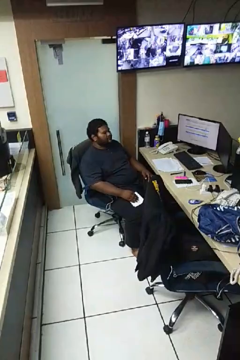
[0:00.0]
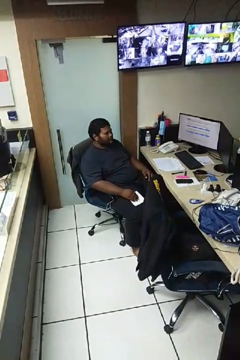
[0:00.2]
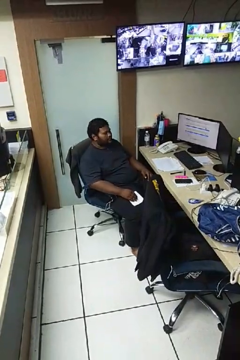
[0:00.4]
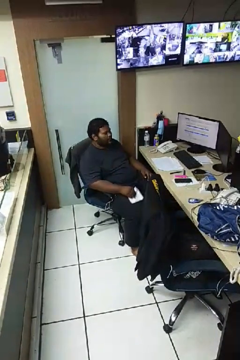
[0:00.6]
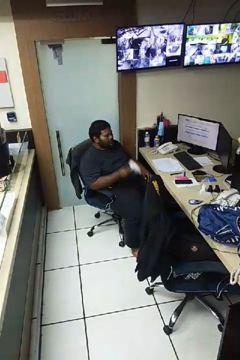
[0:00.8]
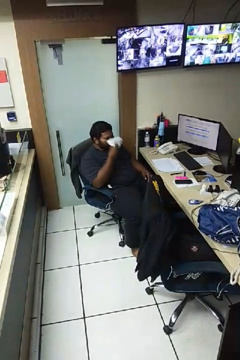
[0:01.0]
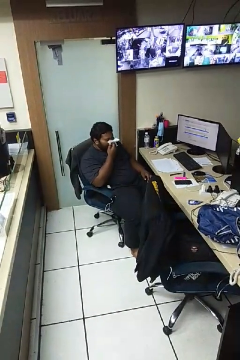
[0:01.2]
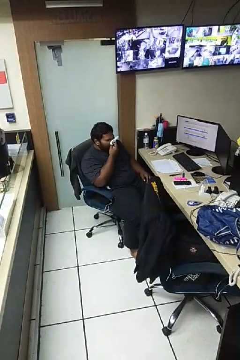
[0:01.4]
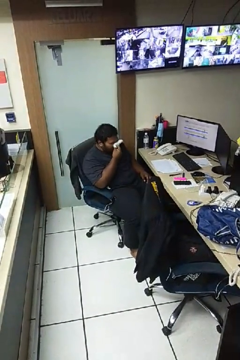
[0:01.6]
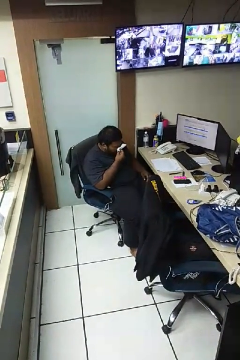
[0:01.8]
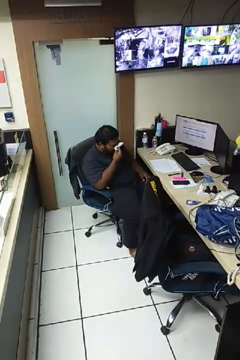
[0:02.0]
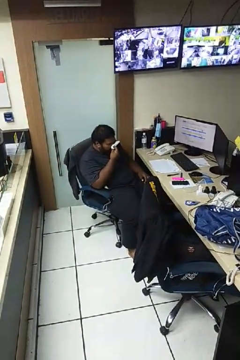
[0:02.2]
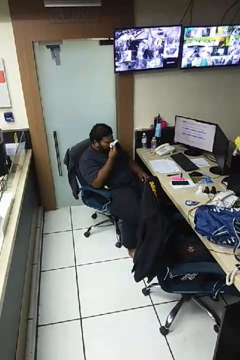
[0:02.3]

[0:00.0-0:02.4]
person blows nose

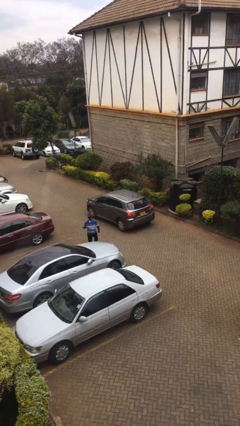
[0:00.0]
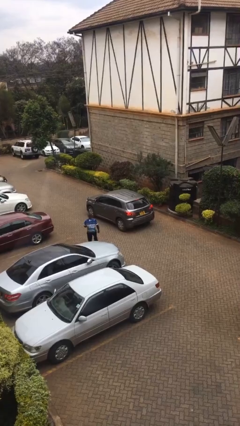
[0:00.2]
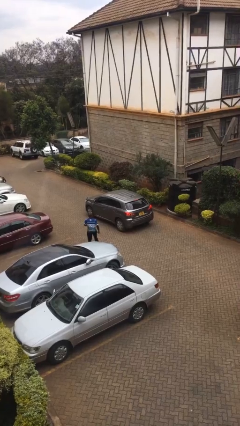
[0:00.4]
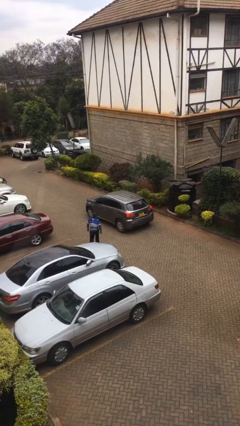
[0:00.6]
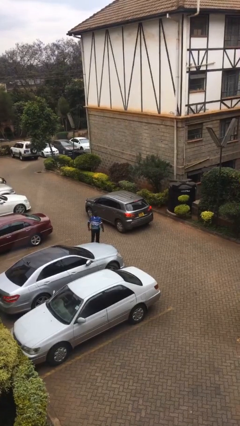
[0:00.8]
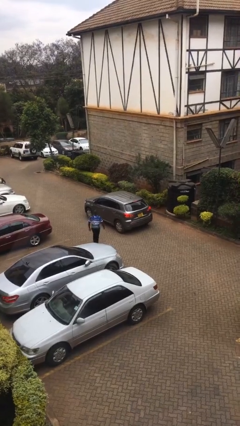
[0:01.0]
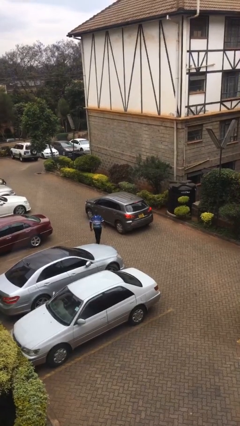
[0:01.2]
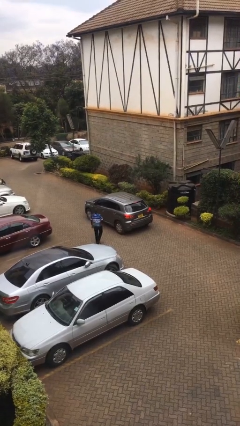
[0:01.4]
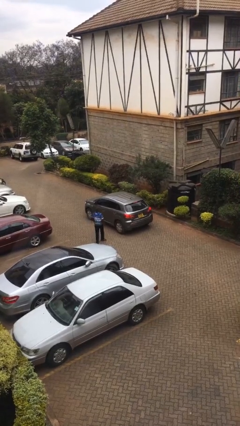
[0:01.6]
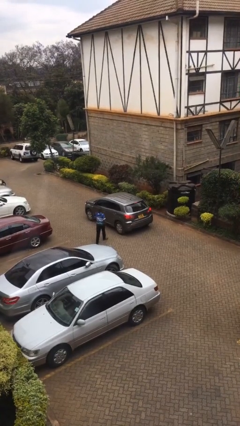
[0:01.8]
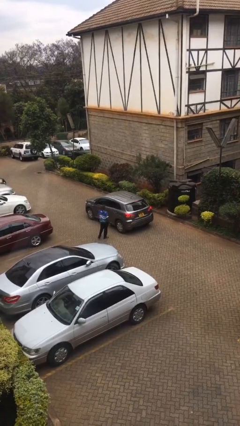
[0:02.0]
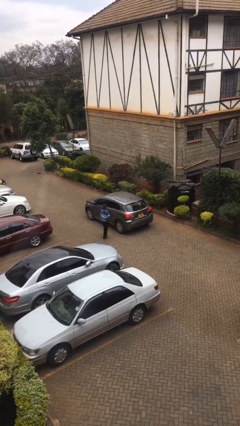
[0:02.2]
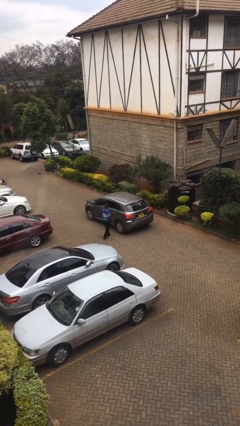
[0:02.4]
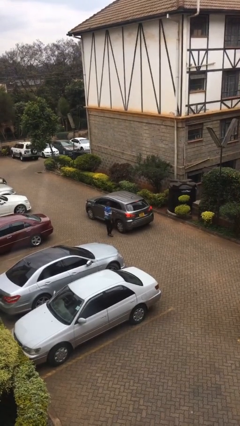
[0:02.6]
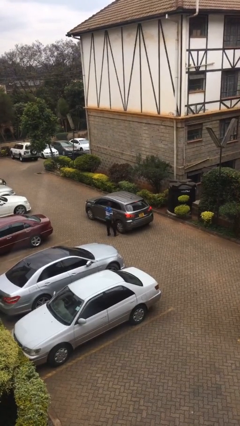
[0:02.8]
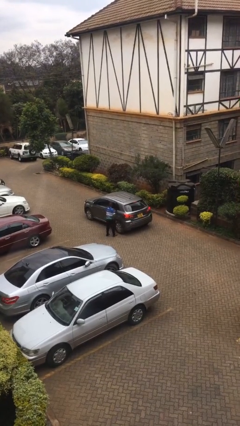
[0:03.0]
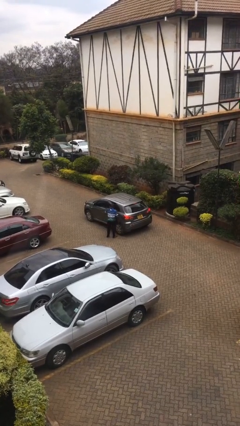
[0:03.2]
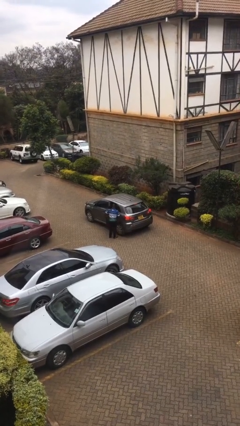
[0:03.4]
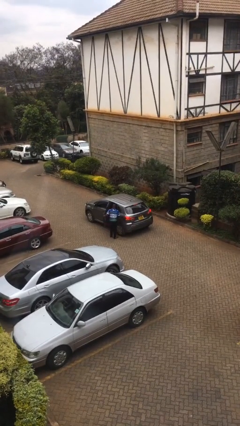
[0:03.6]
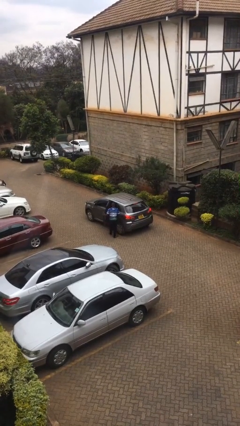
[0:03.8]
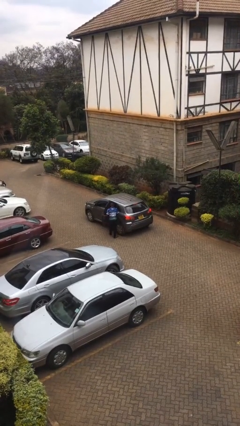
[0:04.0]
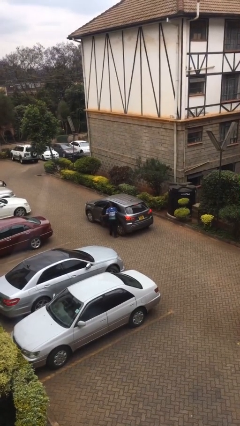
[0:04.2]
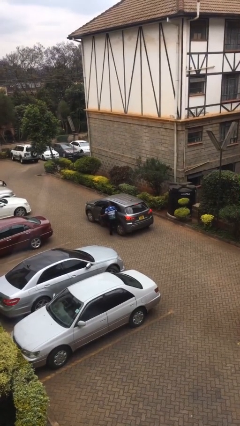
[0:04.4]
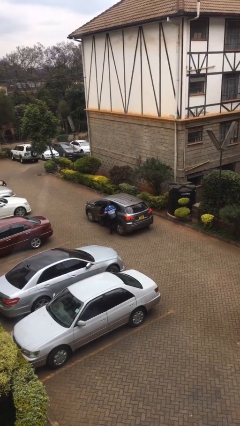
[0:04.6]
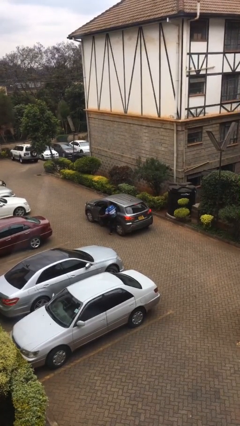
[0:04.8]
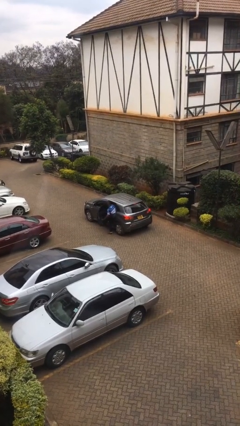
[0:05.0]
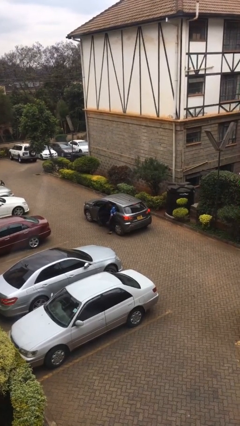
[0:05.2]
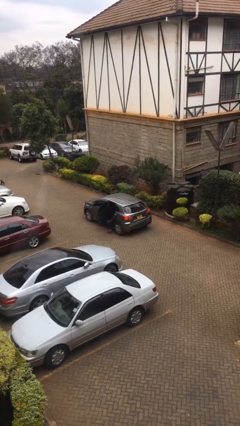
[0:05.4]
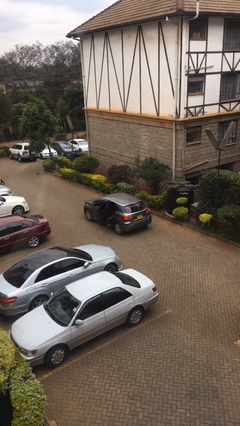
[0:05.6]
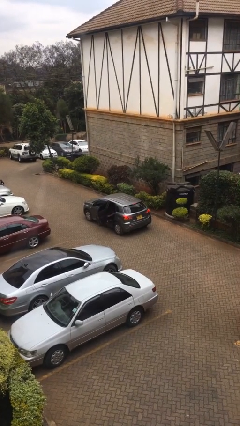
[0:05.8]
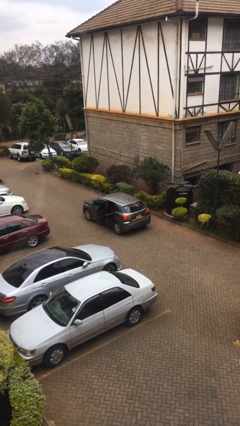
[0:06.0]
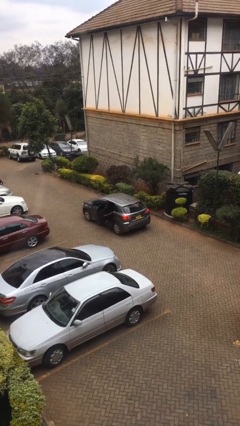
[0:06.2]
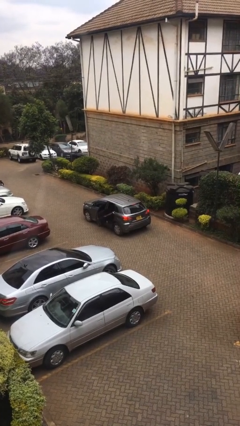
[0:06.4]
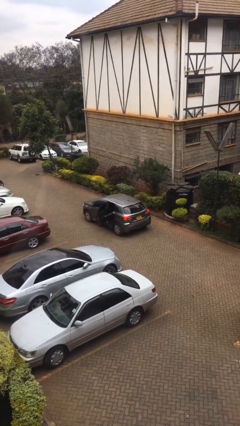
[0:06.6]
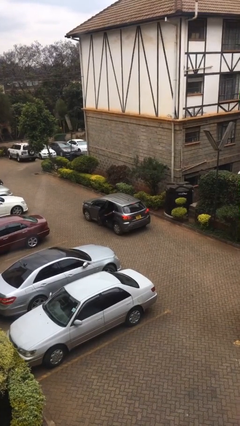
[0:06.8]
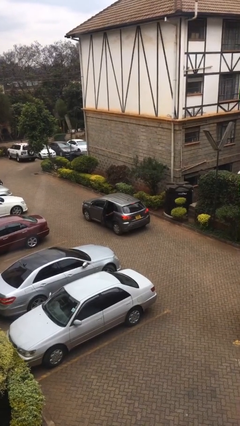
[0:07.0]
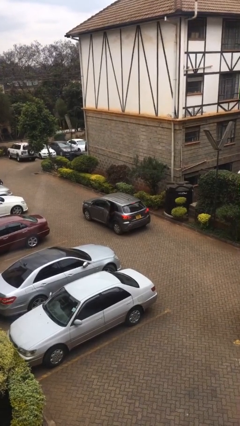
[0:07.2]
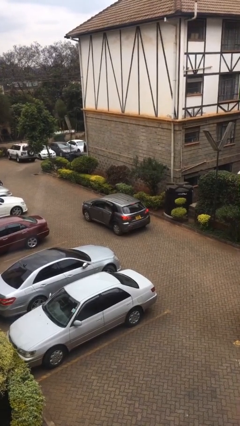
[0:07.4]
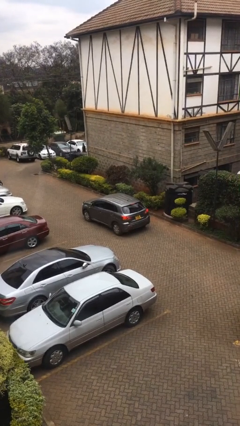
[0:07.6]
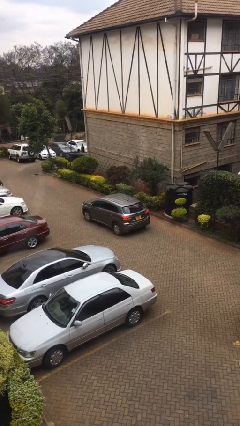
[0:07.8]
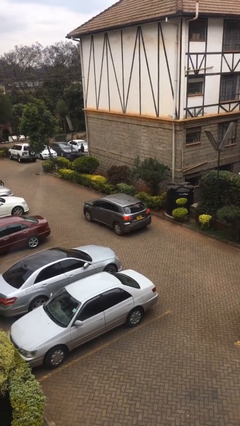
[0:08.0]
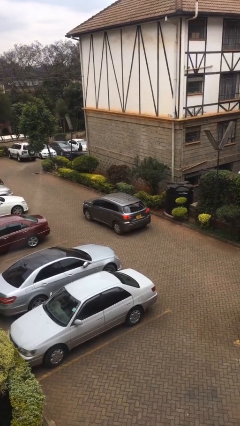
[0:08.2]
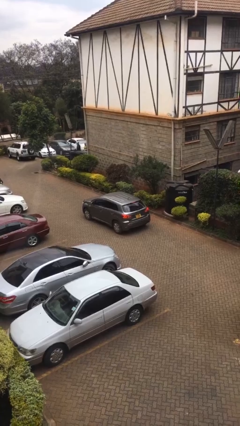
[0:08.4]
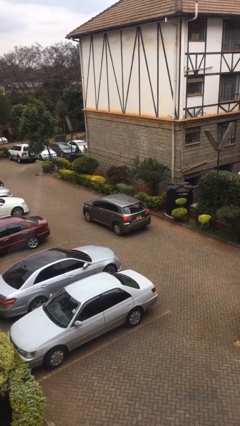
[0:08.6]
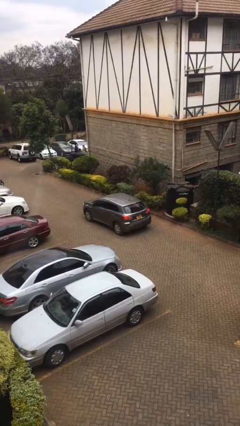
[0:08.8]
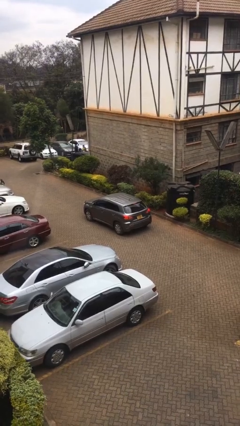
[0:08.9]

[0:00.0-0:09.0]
car picks up person

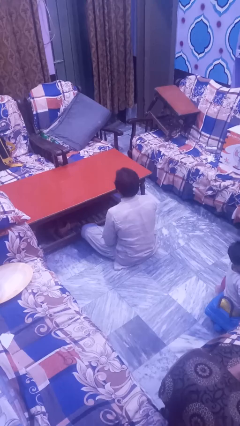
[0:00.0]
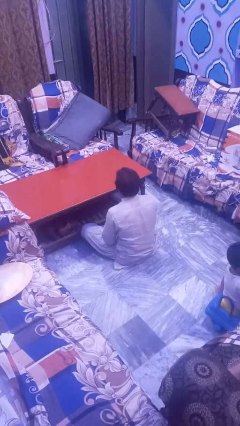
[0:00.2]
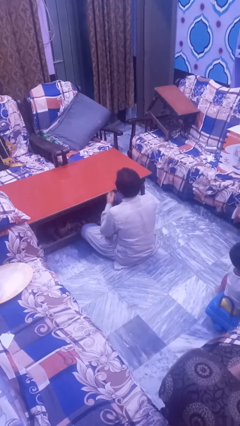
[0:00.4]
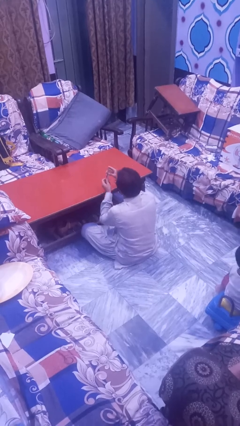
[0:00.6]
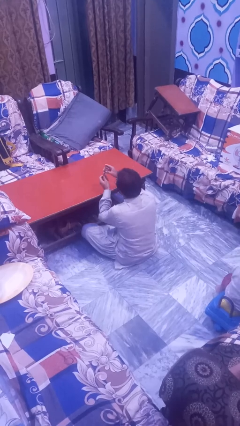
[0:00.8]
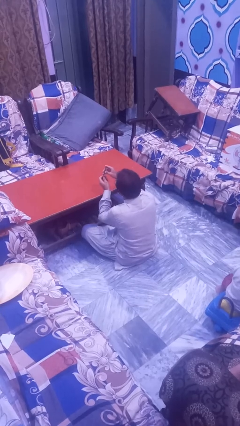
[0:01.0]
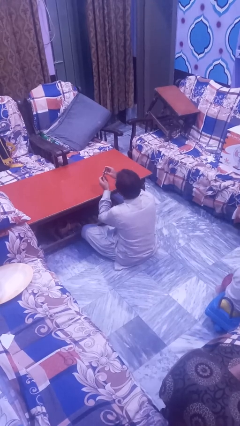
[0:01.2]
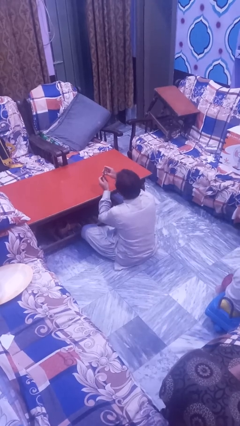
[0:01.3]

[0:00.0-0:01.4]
person clips fingernails

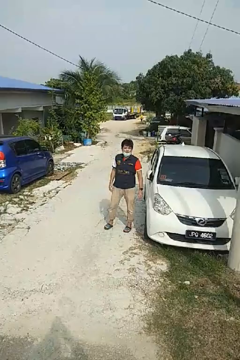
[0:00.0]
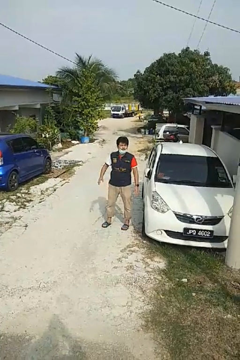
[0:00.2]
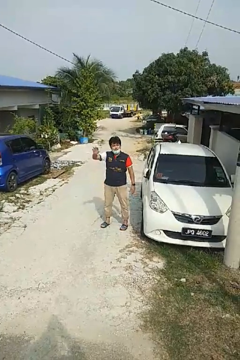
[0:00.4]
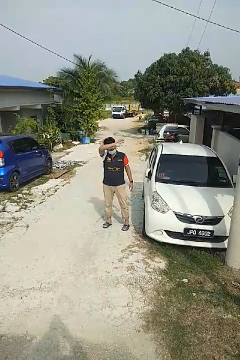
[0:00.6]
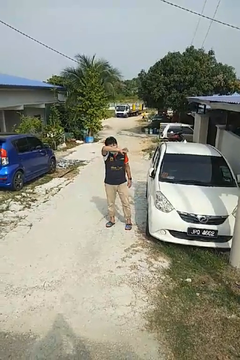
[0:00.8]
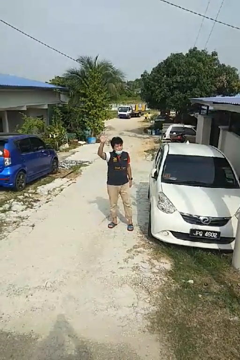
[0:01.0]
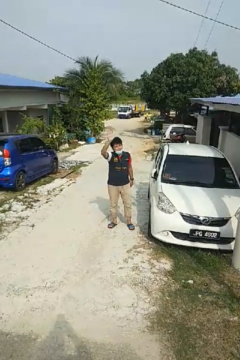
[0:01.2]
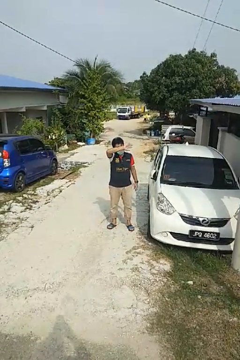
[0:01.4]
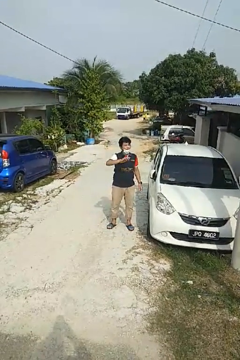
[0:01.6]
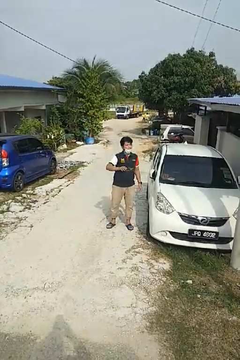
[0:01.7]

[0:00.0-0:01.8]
person waves at person

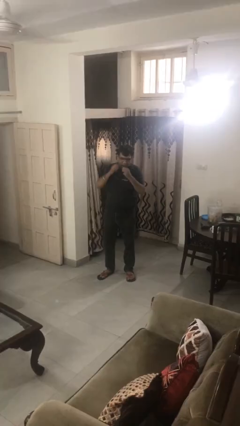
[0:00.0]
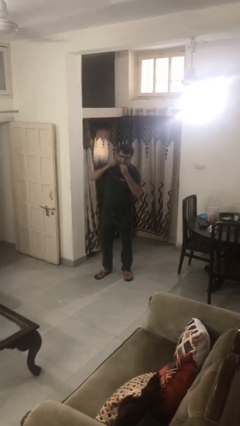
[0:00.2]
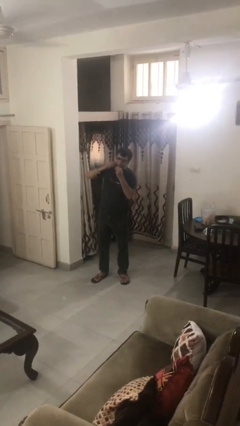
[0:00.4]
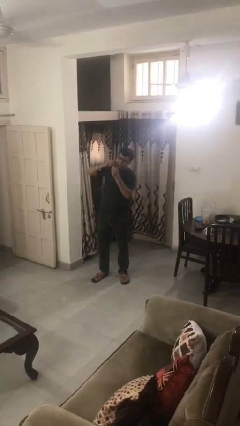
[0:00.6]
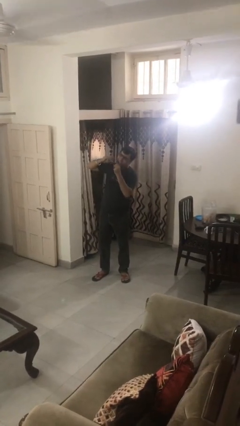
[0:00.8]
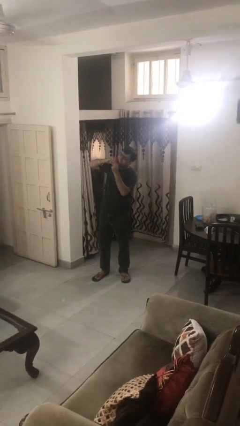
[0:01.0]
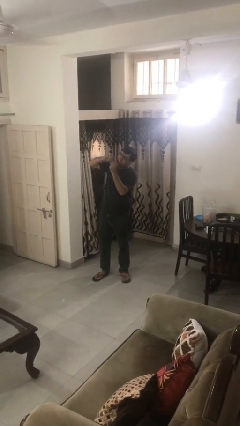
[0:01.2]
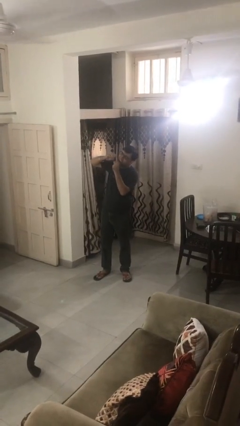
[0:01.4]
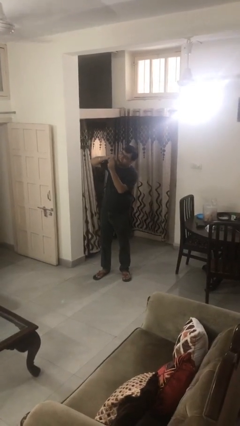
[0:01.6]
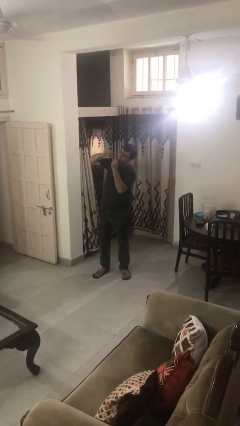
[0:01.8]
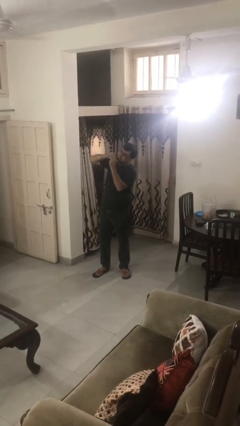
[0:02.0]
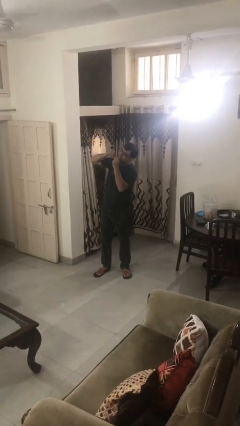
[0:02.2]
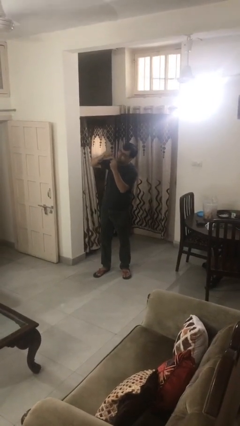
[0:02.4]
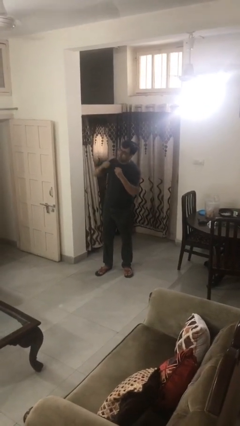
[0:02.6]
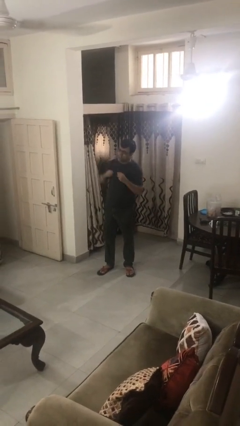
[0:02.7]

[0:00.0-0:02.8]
person flosses

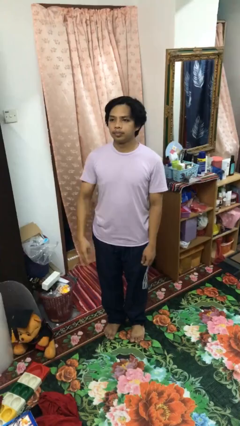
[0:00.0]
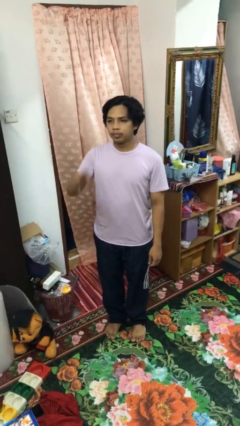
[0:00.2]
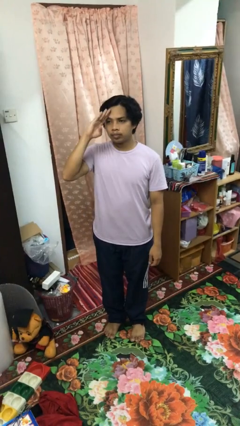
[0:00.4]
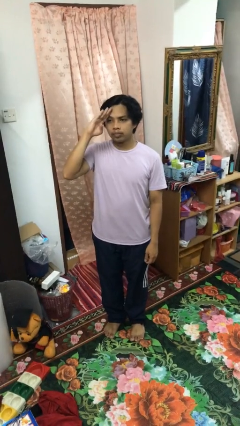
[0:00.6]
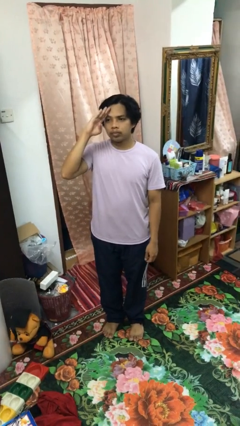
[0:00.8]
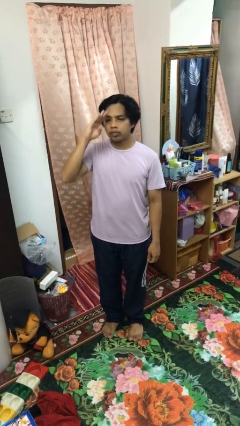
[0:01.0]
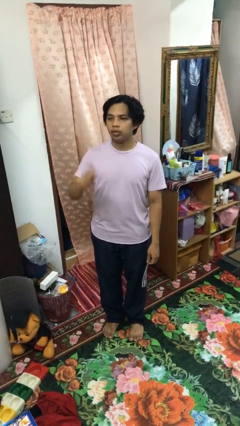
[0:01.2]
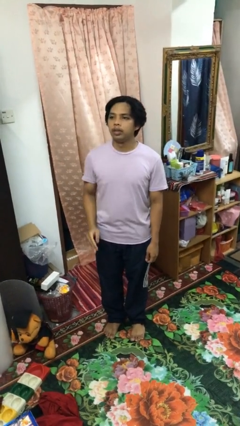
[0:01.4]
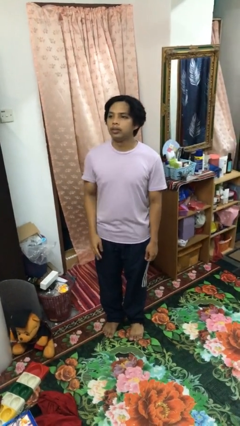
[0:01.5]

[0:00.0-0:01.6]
person salutes
